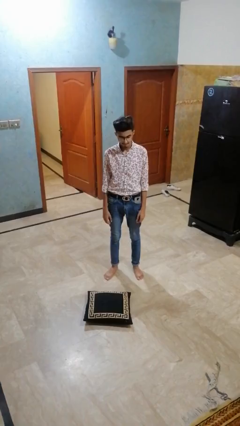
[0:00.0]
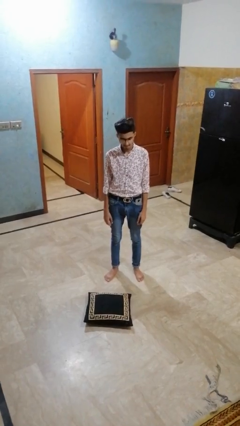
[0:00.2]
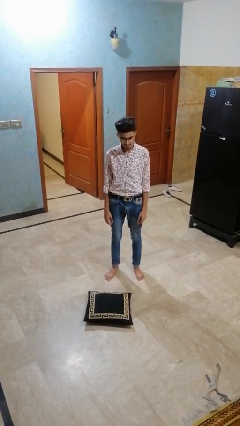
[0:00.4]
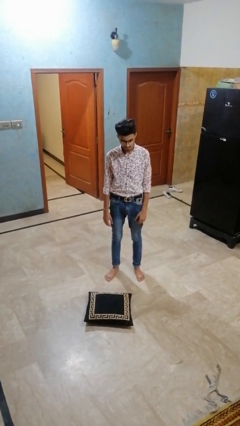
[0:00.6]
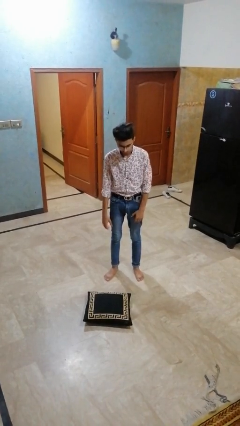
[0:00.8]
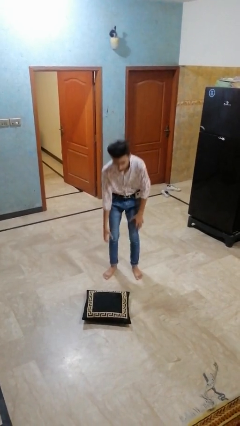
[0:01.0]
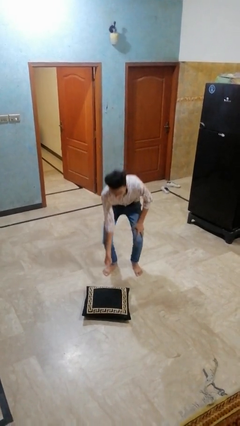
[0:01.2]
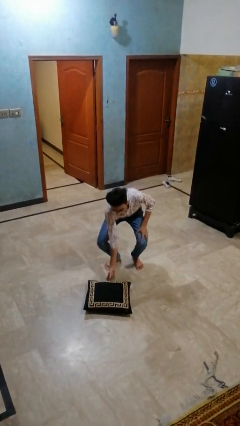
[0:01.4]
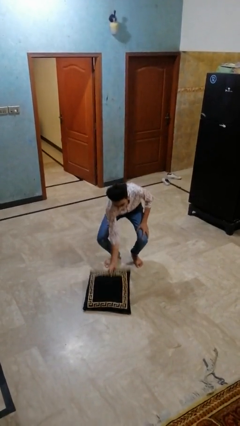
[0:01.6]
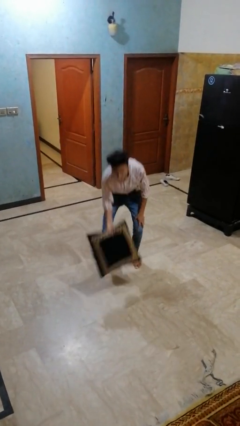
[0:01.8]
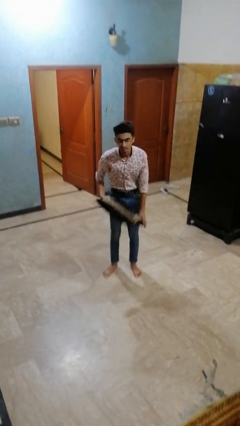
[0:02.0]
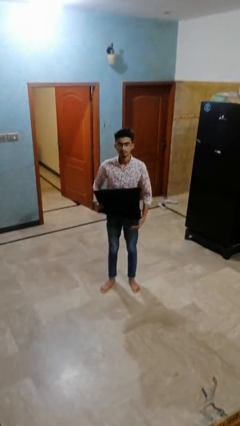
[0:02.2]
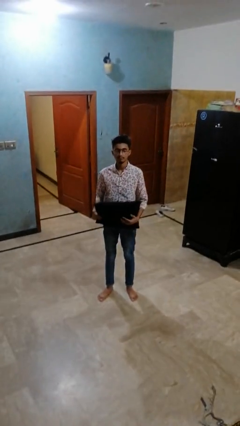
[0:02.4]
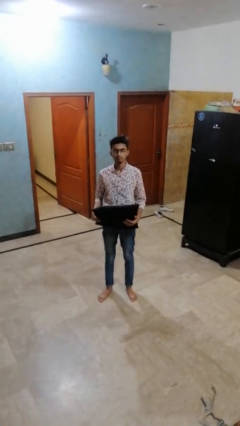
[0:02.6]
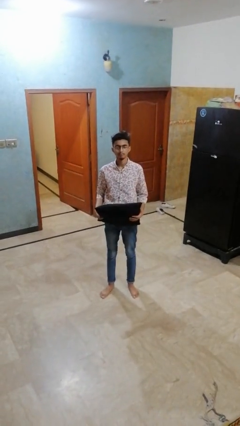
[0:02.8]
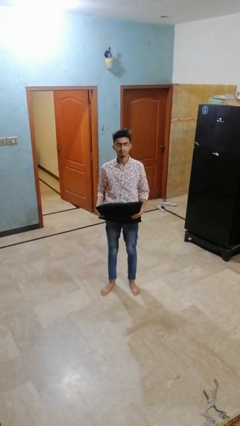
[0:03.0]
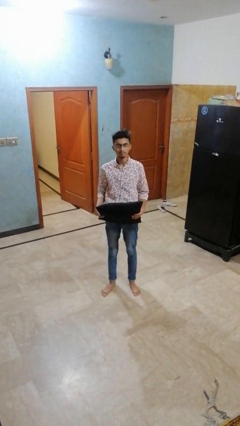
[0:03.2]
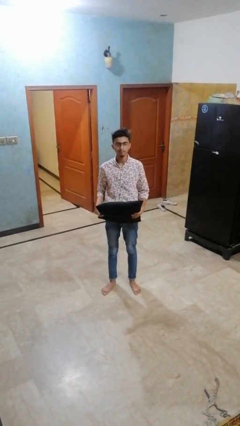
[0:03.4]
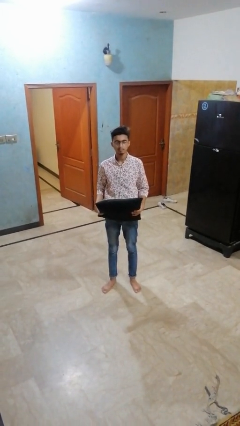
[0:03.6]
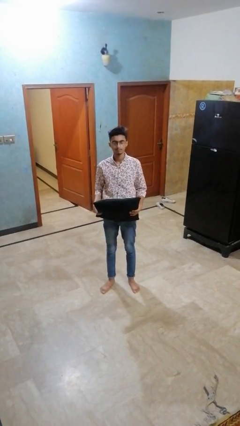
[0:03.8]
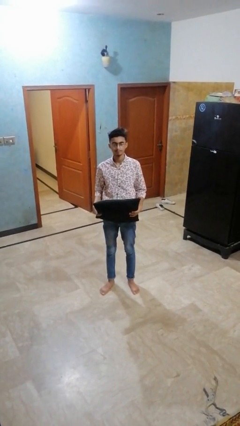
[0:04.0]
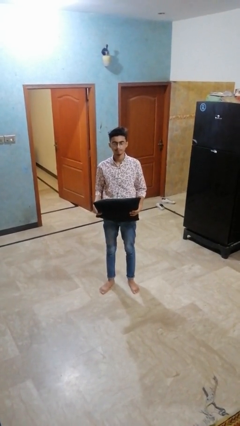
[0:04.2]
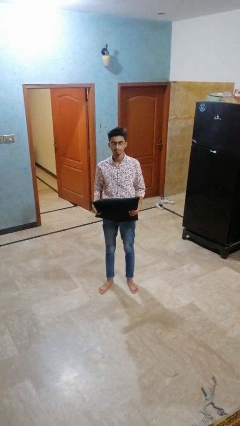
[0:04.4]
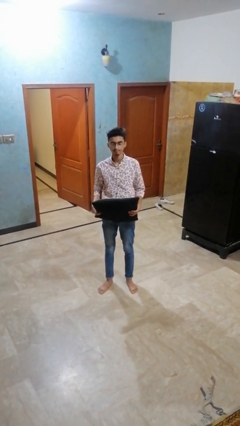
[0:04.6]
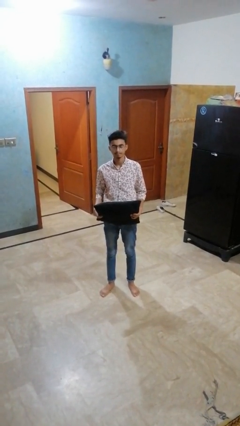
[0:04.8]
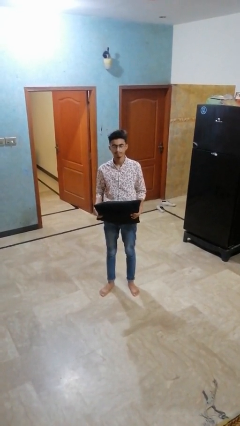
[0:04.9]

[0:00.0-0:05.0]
person picks up object from floor

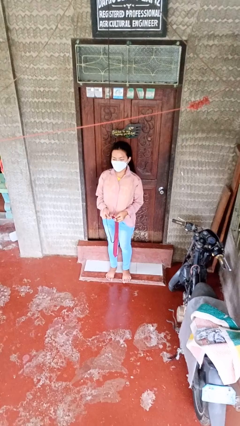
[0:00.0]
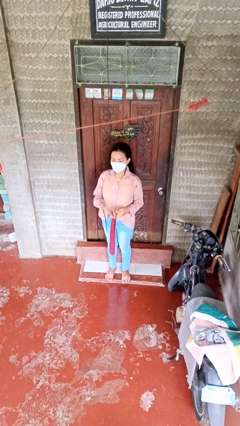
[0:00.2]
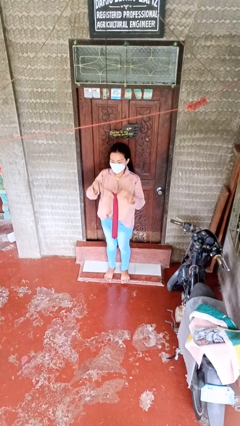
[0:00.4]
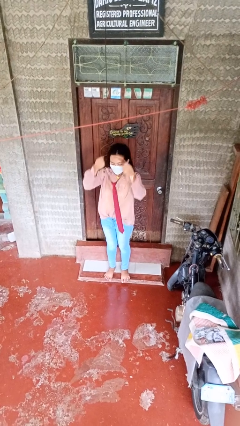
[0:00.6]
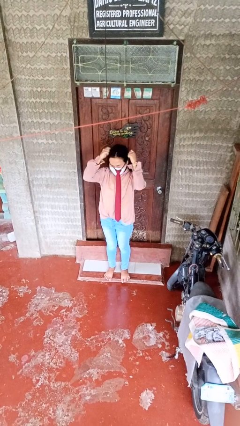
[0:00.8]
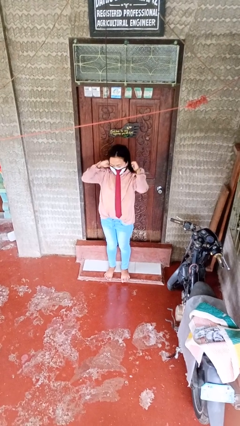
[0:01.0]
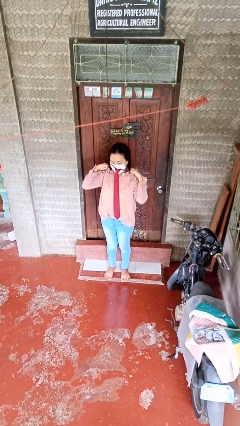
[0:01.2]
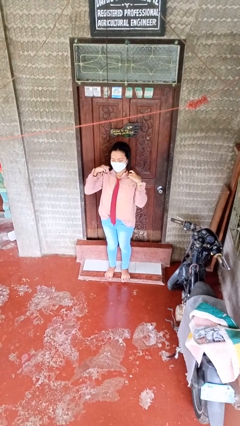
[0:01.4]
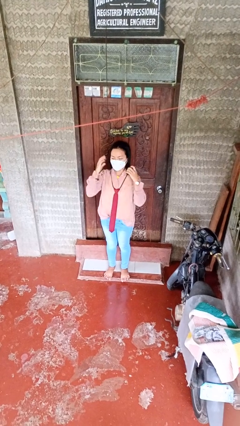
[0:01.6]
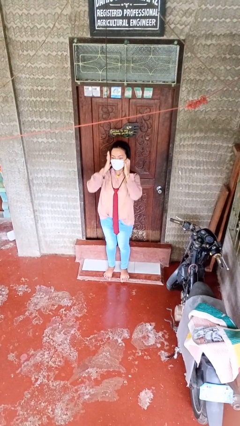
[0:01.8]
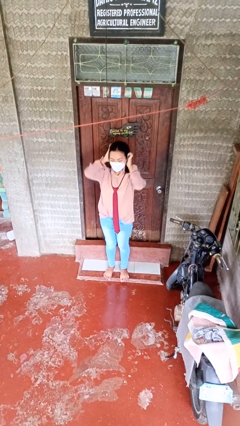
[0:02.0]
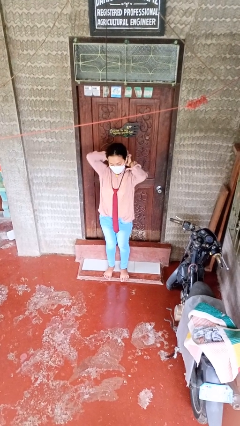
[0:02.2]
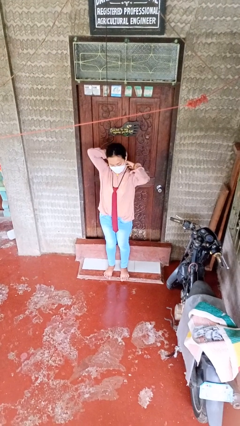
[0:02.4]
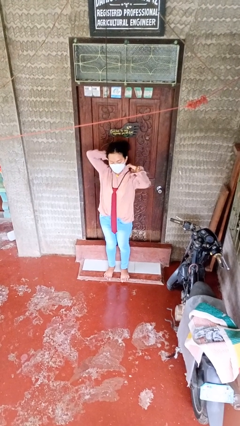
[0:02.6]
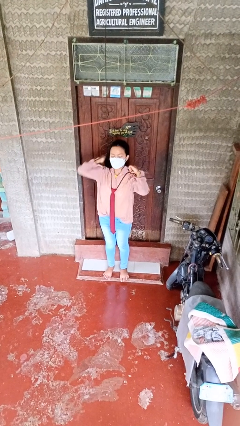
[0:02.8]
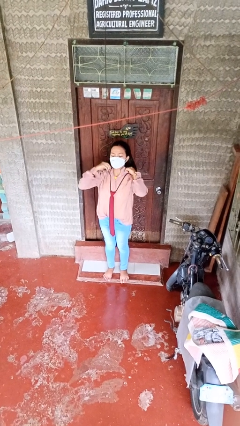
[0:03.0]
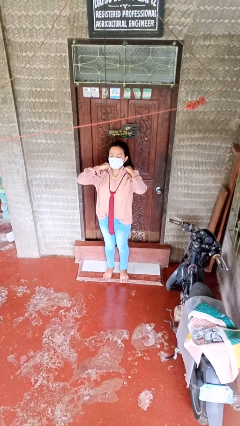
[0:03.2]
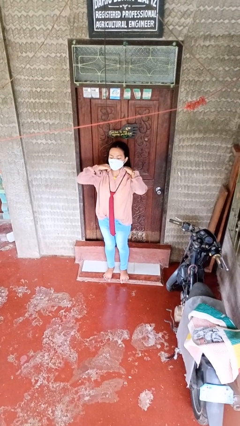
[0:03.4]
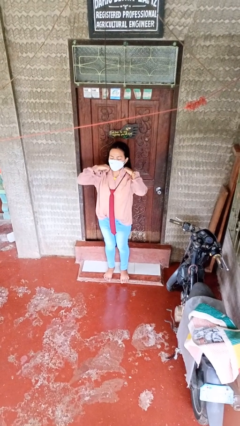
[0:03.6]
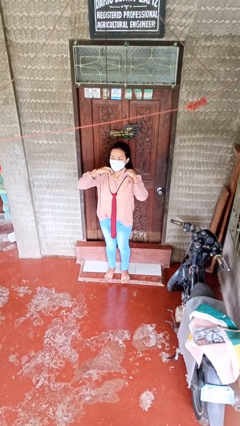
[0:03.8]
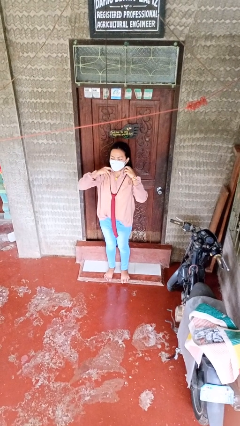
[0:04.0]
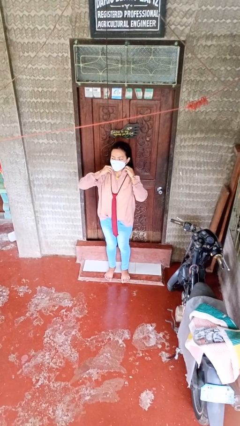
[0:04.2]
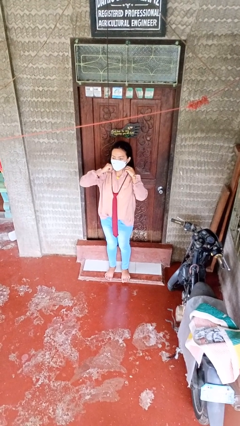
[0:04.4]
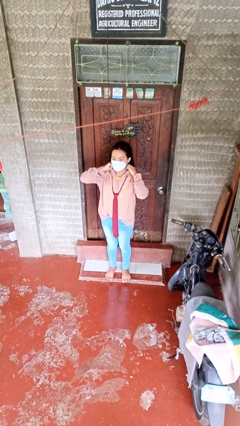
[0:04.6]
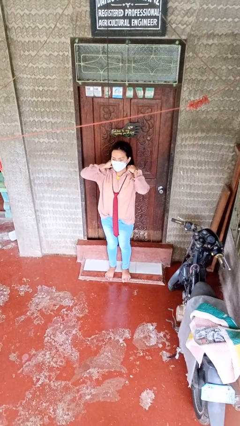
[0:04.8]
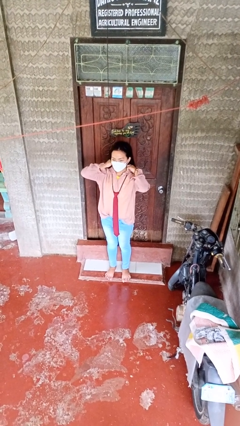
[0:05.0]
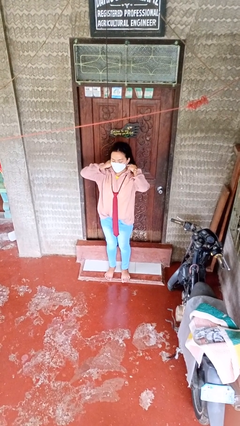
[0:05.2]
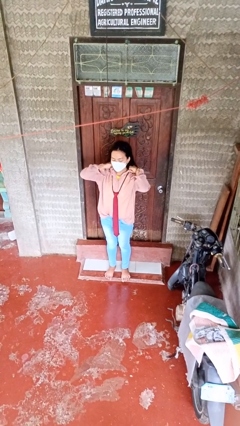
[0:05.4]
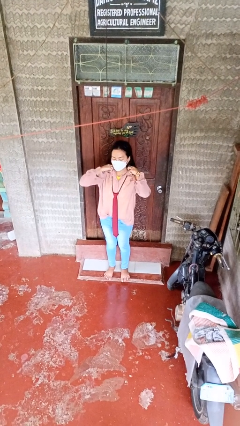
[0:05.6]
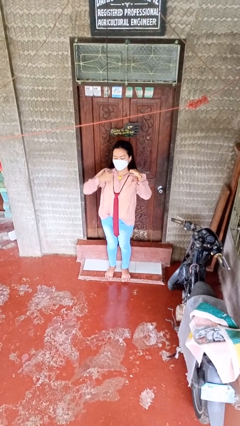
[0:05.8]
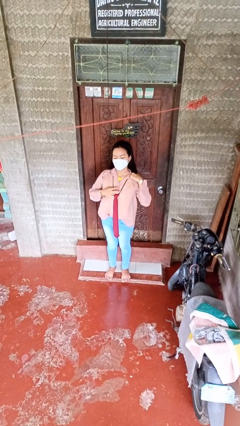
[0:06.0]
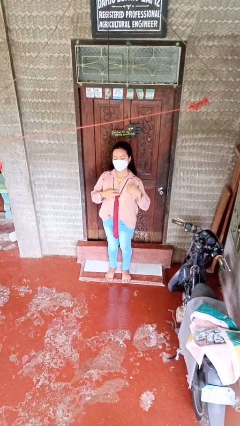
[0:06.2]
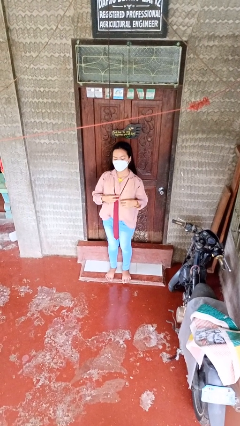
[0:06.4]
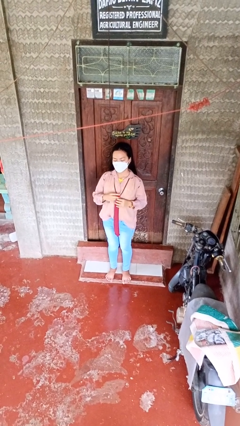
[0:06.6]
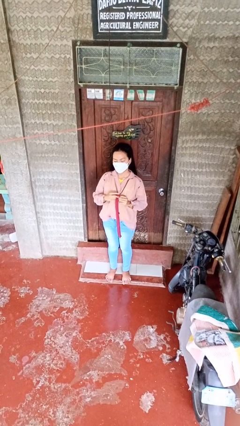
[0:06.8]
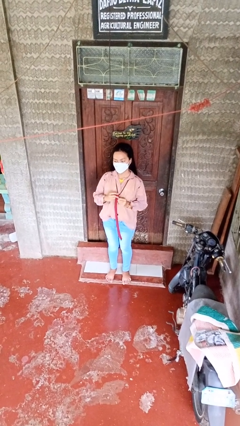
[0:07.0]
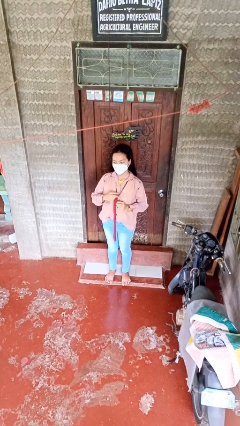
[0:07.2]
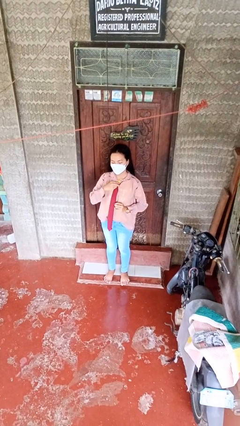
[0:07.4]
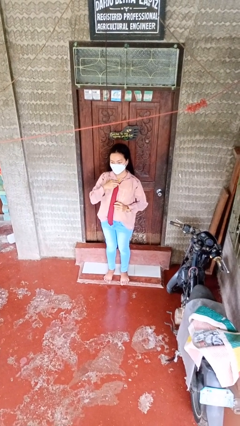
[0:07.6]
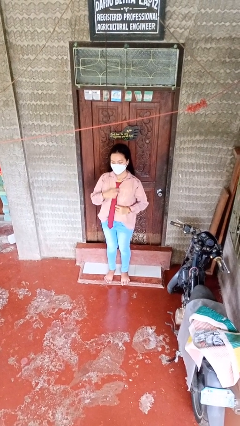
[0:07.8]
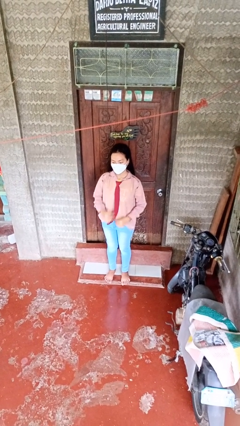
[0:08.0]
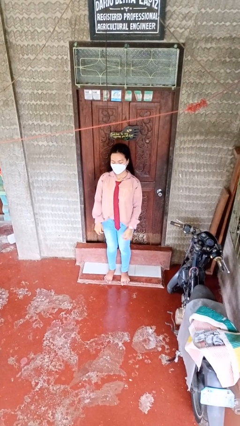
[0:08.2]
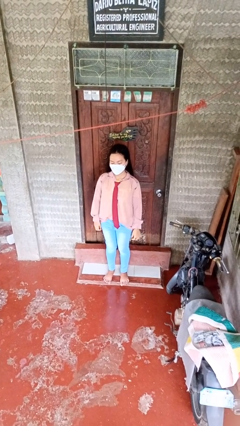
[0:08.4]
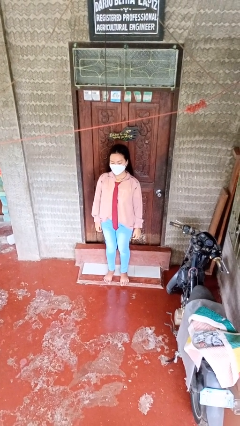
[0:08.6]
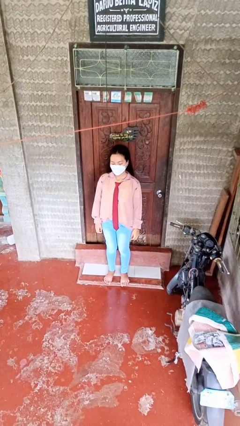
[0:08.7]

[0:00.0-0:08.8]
person puts on necktie

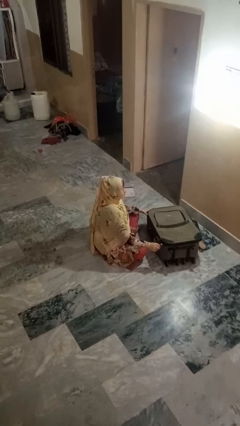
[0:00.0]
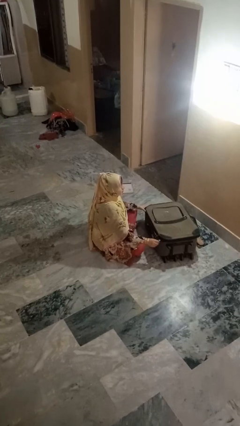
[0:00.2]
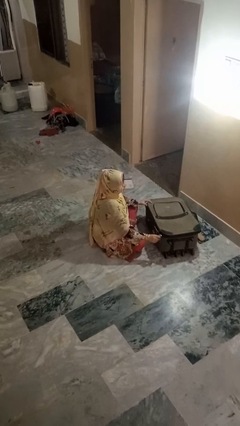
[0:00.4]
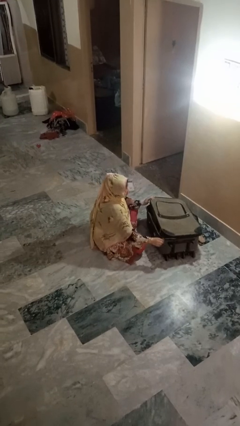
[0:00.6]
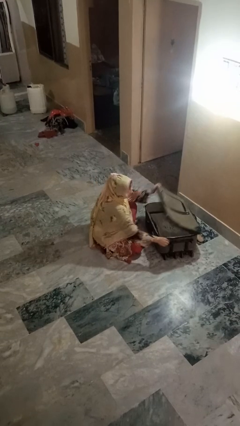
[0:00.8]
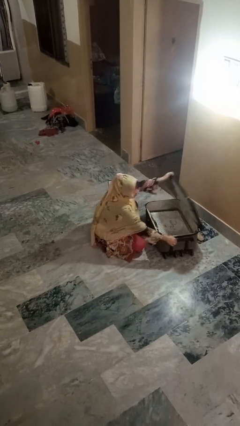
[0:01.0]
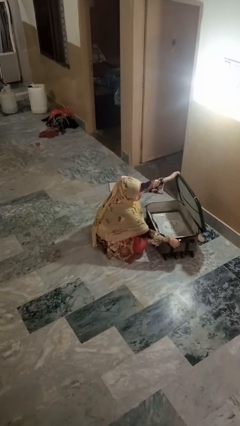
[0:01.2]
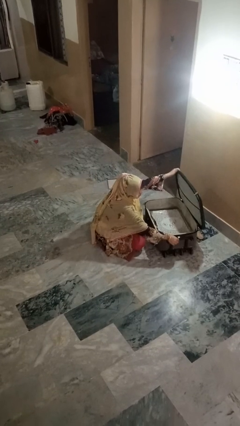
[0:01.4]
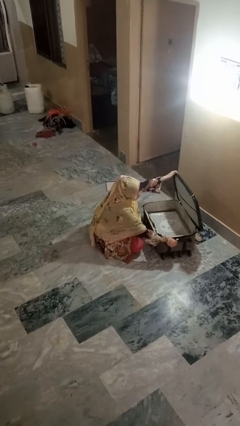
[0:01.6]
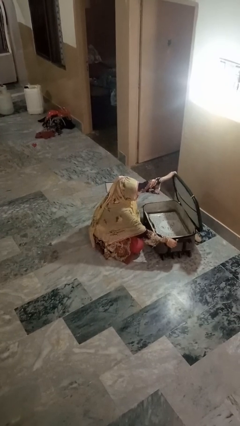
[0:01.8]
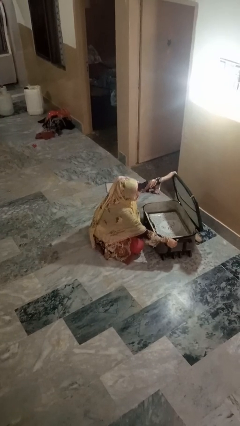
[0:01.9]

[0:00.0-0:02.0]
person opens suitcase

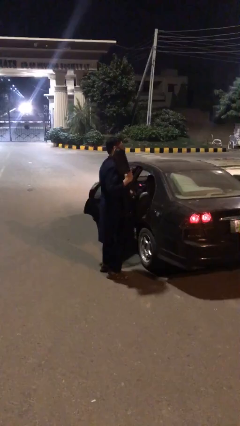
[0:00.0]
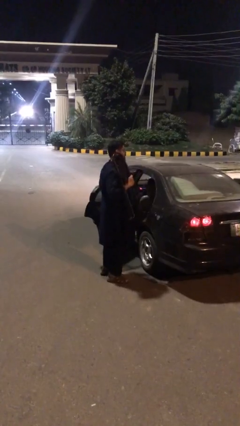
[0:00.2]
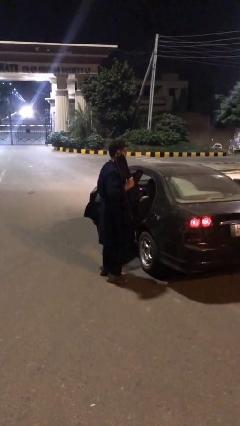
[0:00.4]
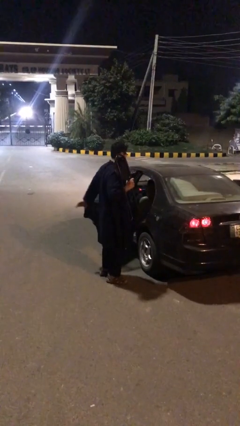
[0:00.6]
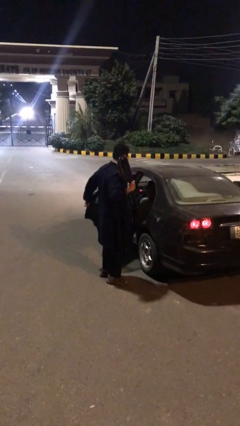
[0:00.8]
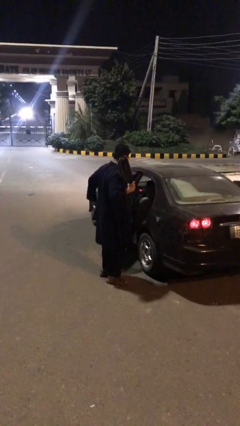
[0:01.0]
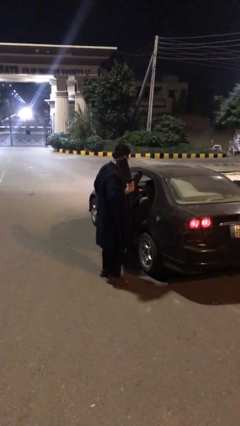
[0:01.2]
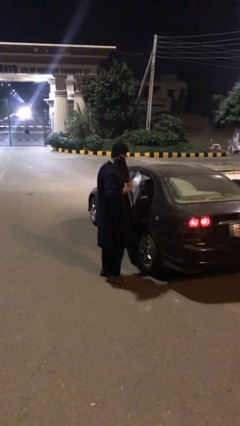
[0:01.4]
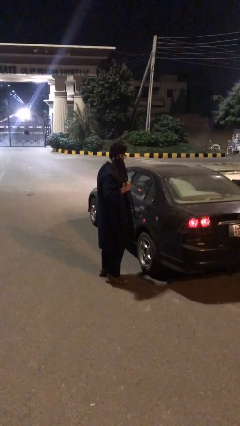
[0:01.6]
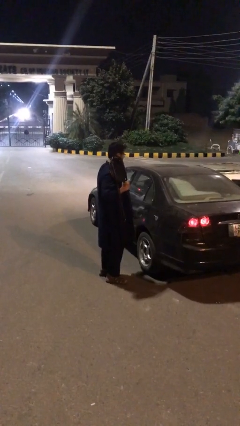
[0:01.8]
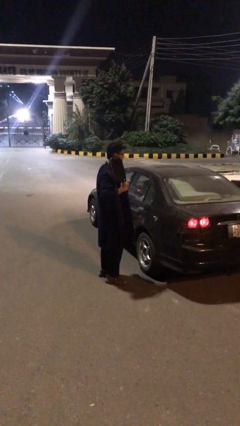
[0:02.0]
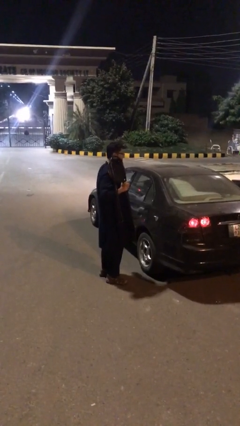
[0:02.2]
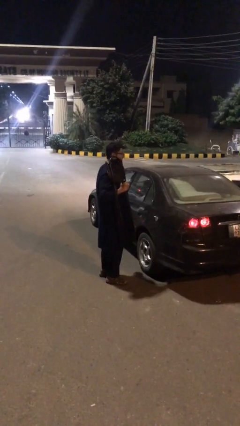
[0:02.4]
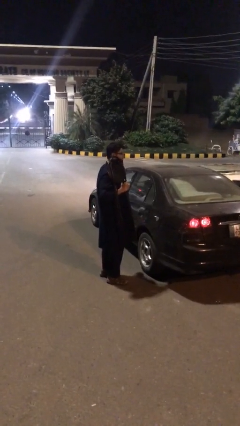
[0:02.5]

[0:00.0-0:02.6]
person closes car door
